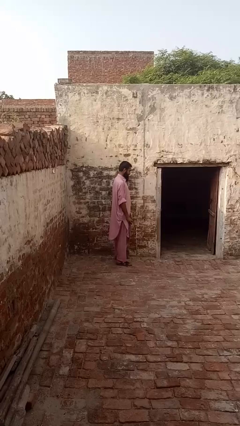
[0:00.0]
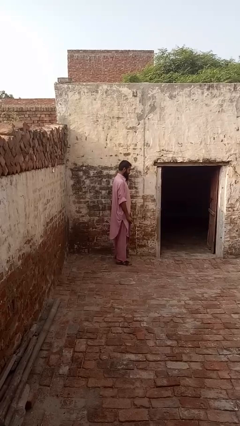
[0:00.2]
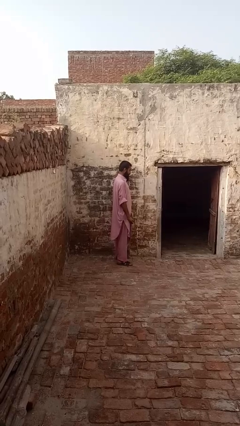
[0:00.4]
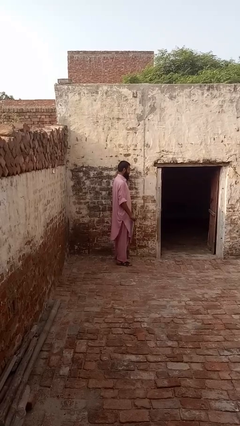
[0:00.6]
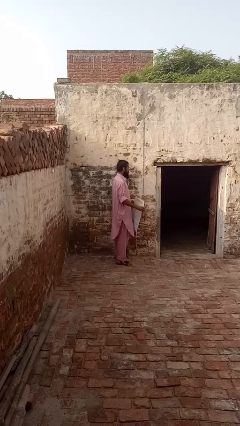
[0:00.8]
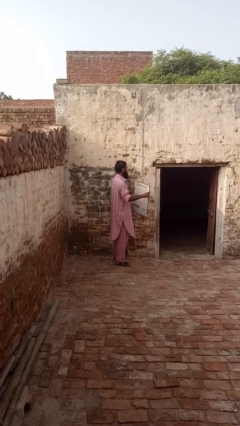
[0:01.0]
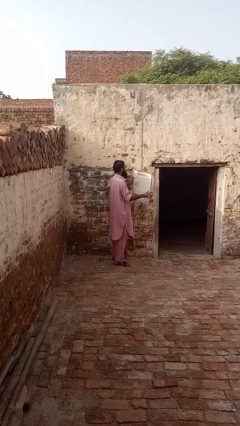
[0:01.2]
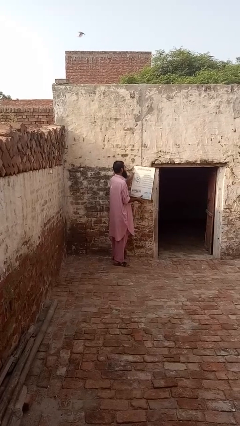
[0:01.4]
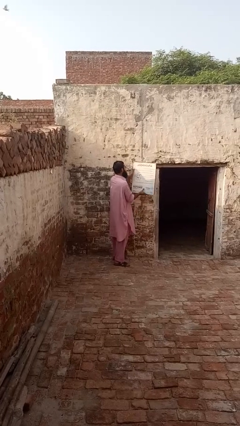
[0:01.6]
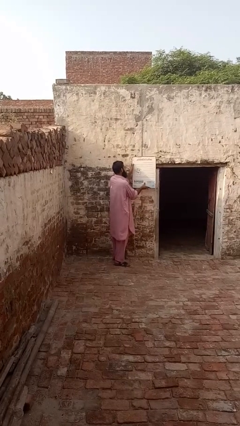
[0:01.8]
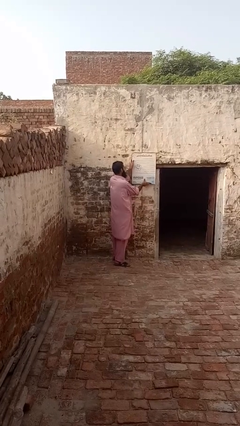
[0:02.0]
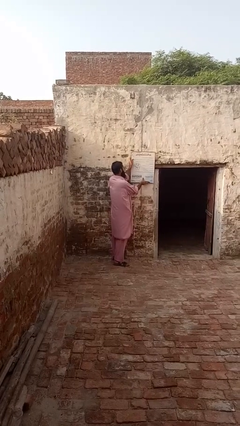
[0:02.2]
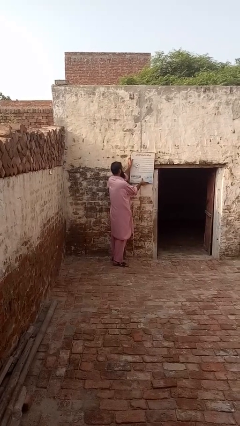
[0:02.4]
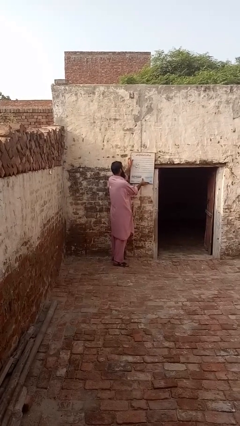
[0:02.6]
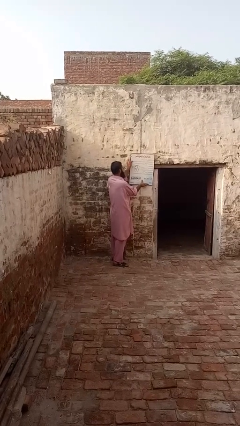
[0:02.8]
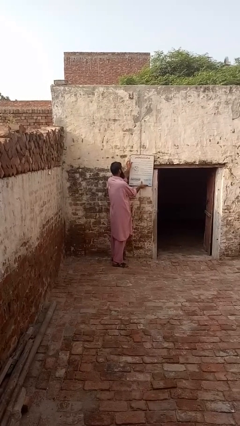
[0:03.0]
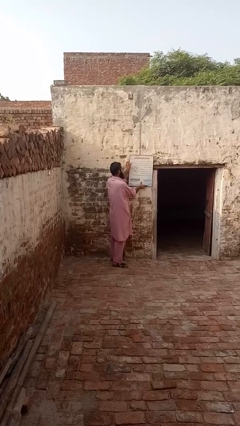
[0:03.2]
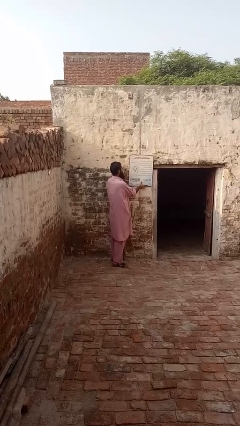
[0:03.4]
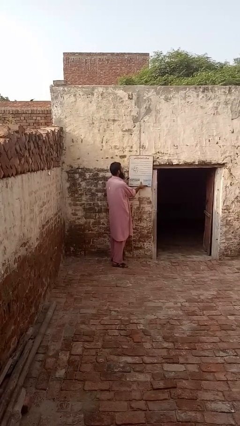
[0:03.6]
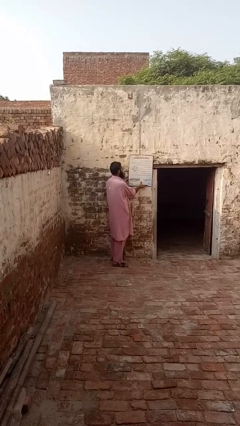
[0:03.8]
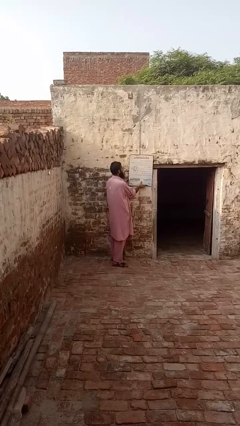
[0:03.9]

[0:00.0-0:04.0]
person puts up picture frame

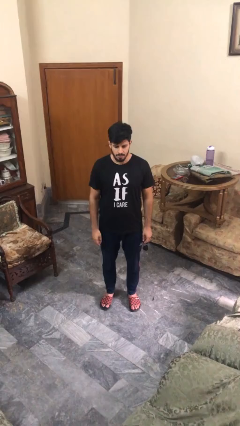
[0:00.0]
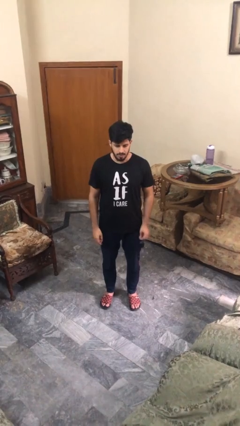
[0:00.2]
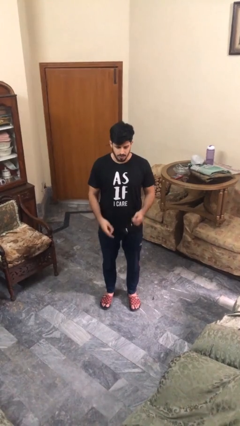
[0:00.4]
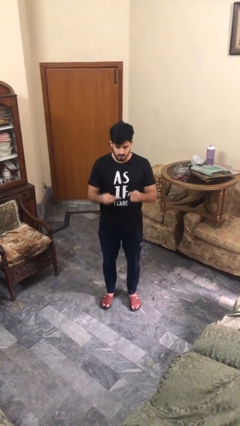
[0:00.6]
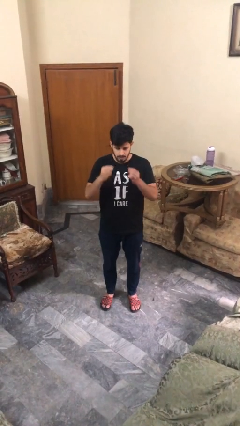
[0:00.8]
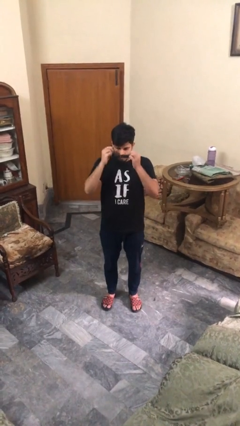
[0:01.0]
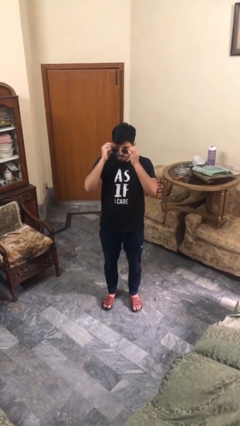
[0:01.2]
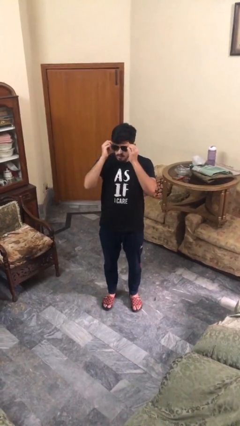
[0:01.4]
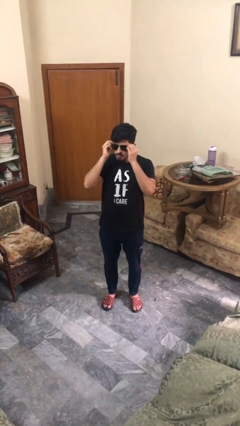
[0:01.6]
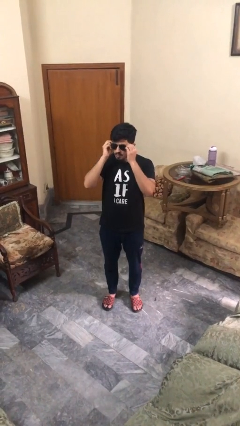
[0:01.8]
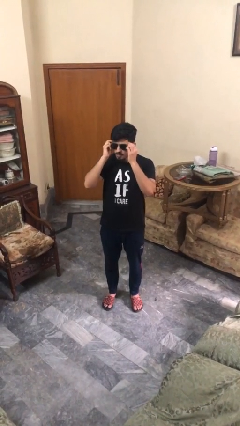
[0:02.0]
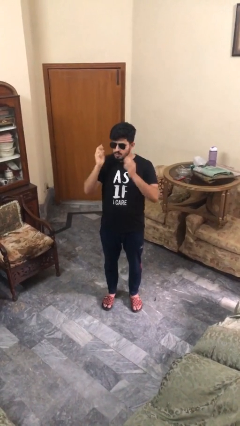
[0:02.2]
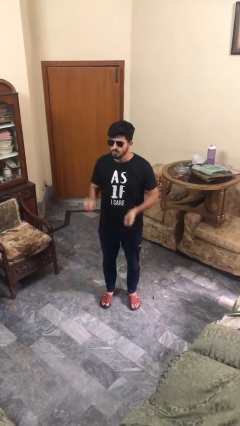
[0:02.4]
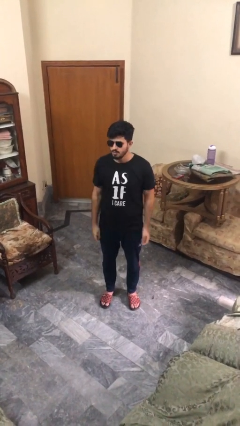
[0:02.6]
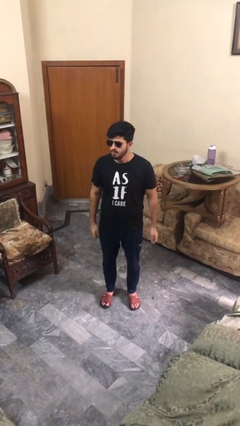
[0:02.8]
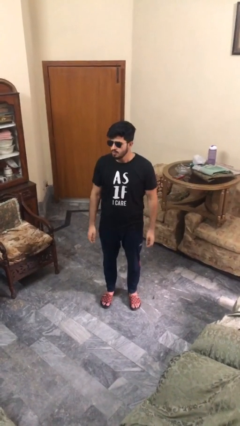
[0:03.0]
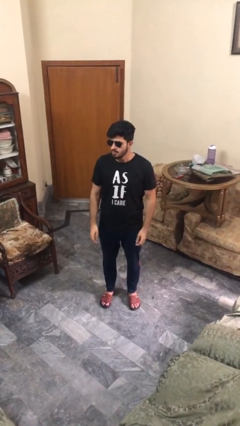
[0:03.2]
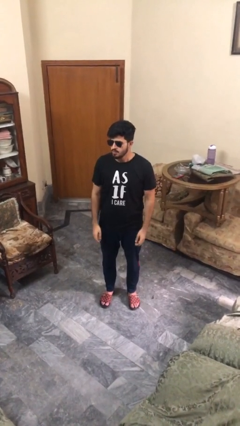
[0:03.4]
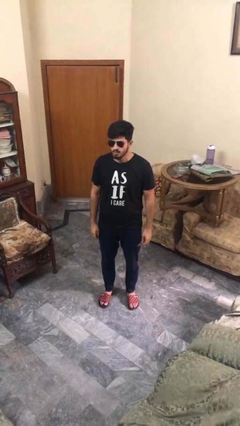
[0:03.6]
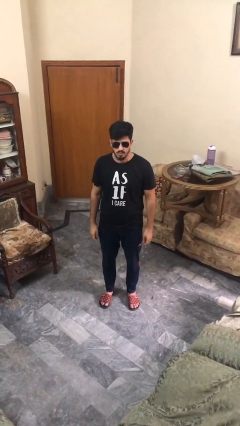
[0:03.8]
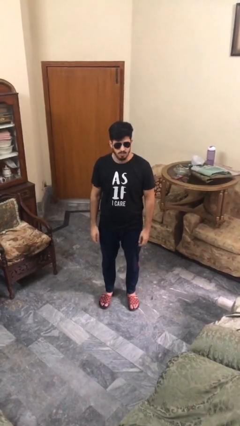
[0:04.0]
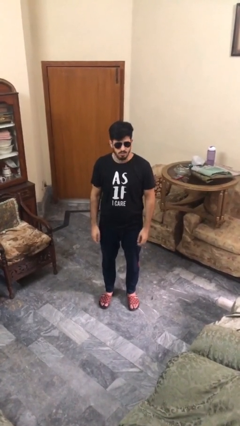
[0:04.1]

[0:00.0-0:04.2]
person puts on sunglasses

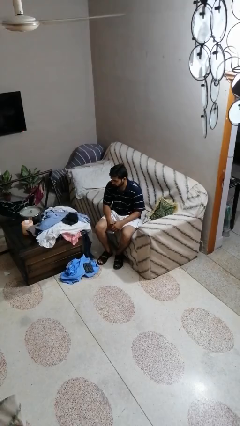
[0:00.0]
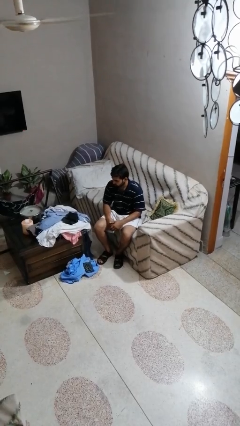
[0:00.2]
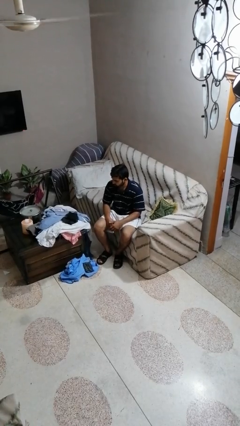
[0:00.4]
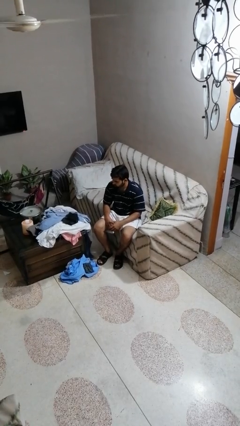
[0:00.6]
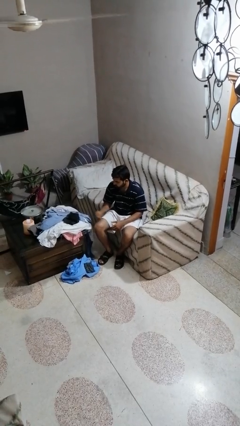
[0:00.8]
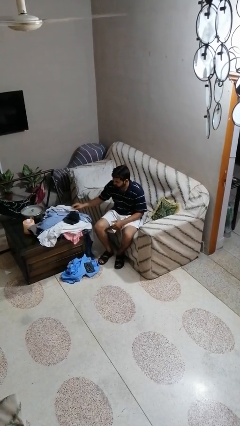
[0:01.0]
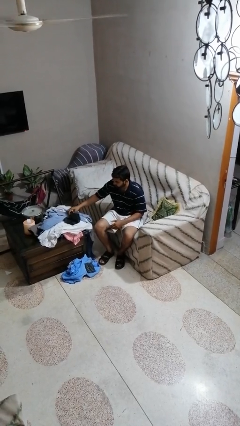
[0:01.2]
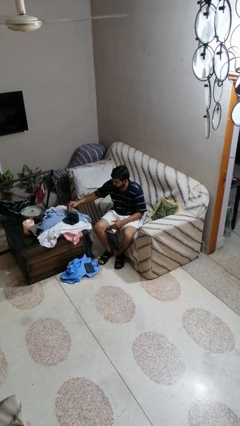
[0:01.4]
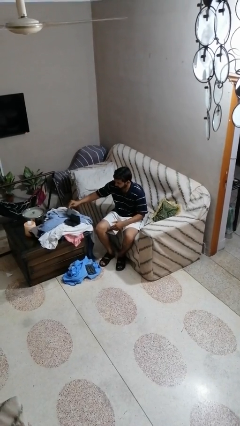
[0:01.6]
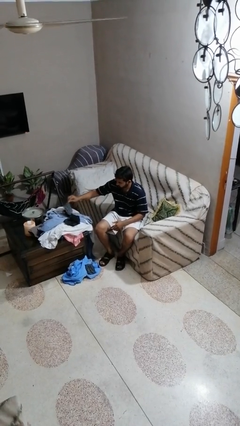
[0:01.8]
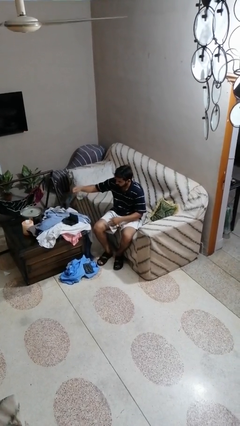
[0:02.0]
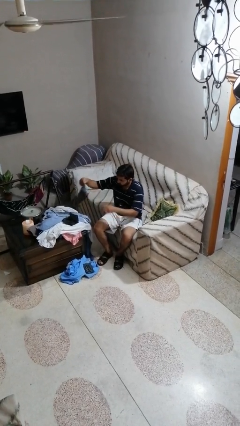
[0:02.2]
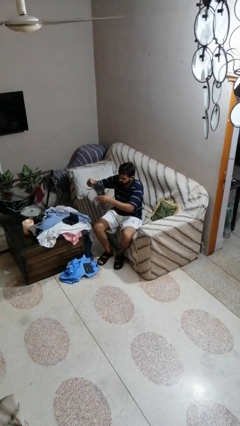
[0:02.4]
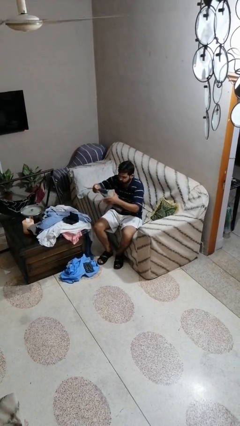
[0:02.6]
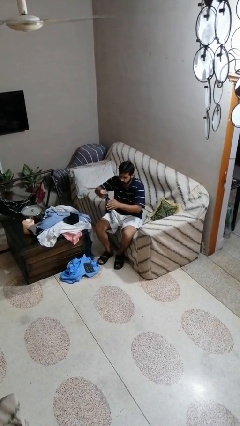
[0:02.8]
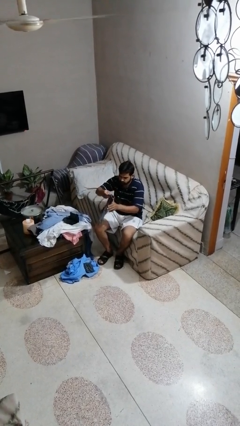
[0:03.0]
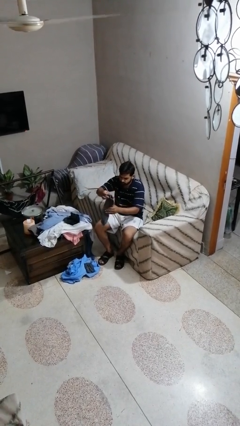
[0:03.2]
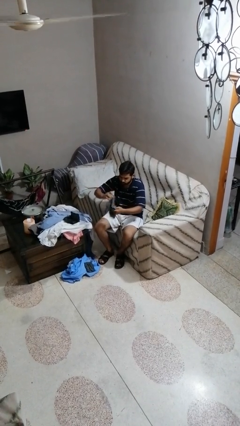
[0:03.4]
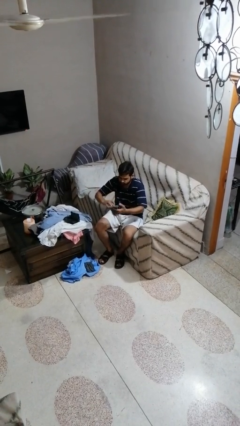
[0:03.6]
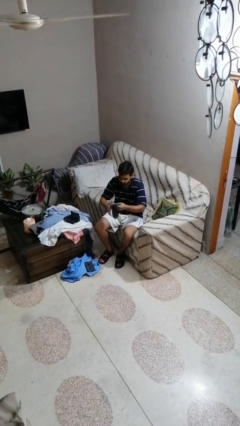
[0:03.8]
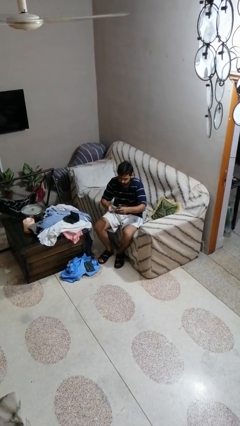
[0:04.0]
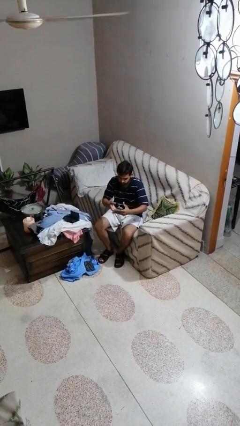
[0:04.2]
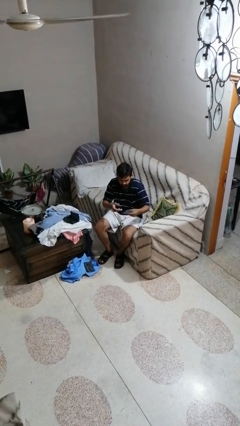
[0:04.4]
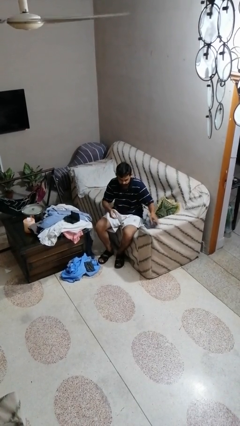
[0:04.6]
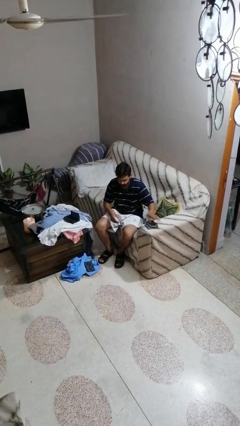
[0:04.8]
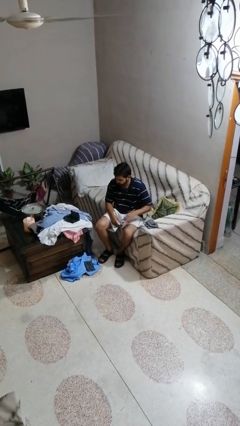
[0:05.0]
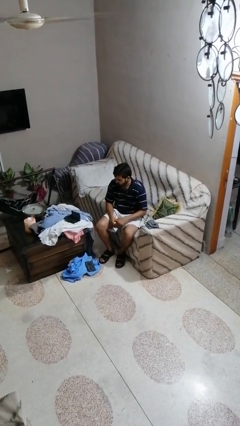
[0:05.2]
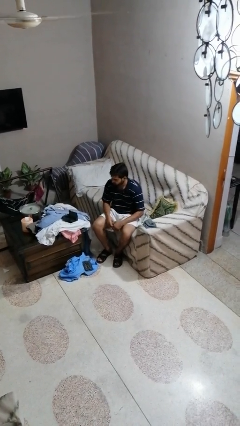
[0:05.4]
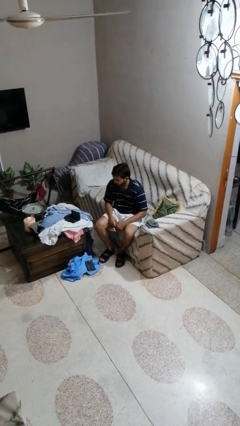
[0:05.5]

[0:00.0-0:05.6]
person folds socks

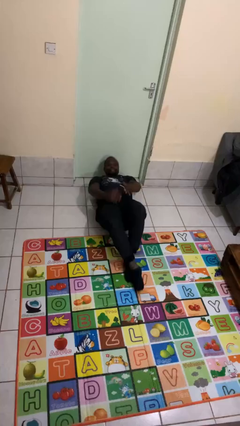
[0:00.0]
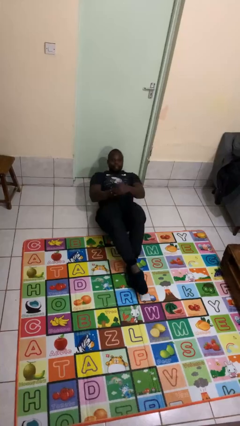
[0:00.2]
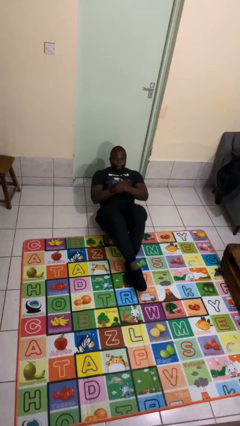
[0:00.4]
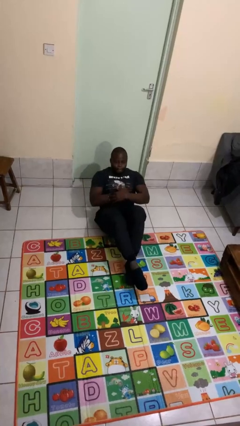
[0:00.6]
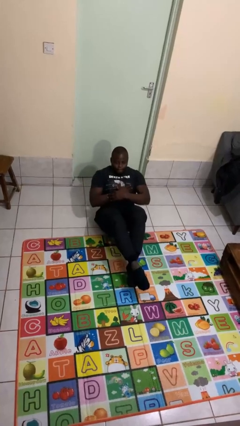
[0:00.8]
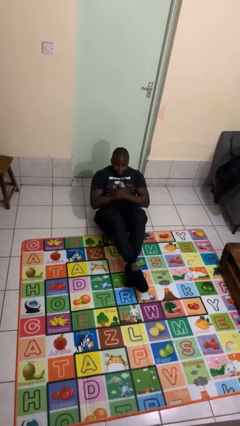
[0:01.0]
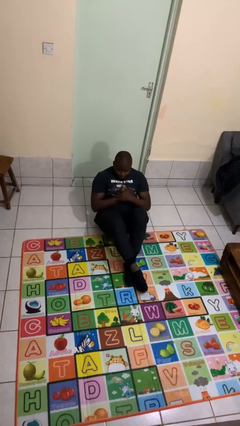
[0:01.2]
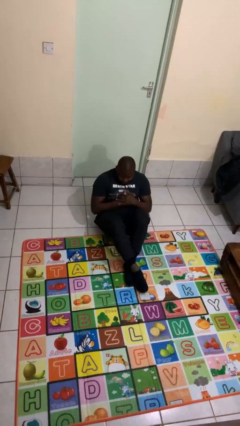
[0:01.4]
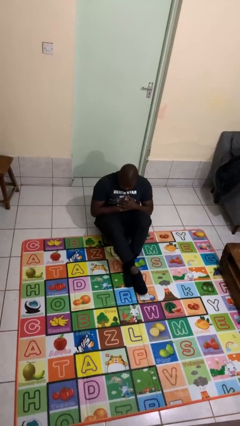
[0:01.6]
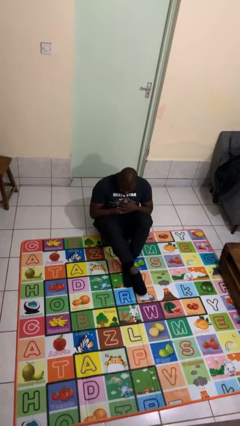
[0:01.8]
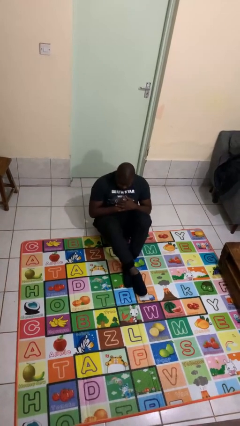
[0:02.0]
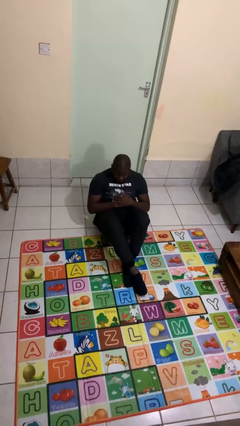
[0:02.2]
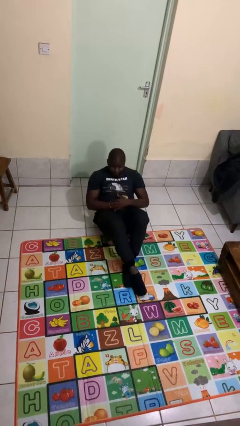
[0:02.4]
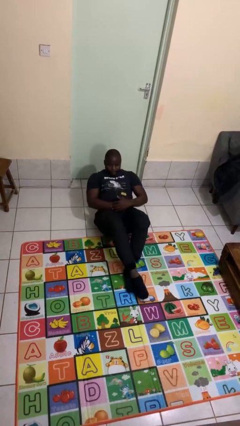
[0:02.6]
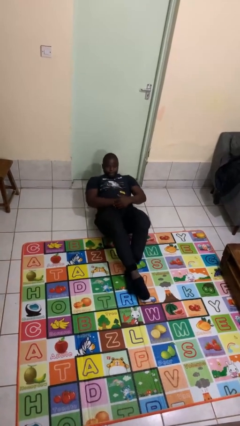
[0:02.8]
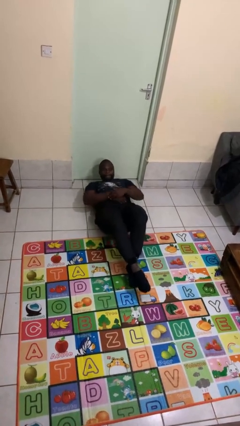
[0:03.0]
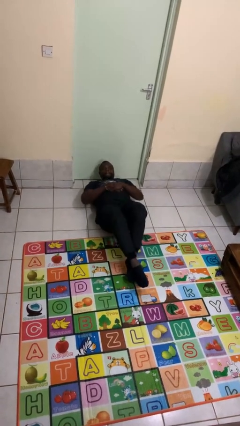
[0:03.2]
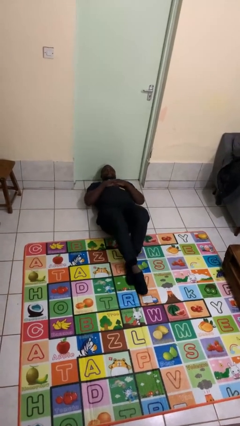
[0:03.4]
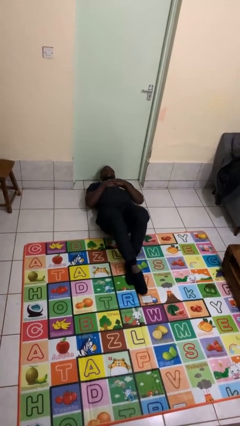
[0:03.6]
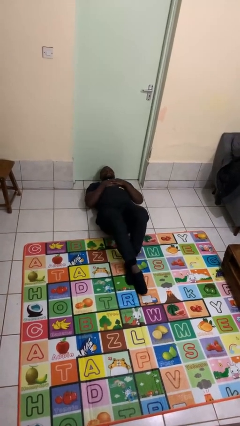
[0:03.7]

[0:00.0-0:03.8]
person exercises with situp

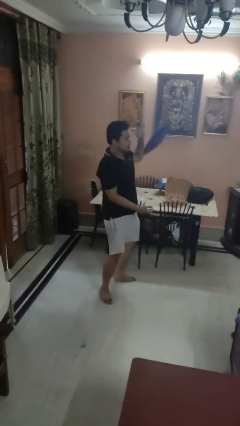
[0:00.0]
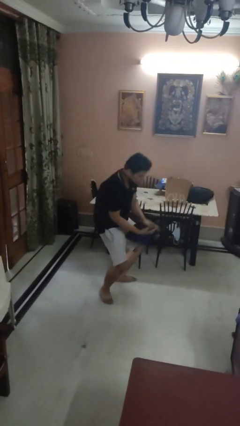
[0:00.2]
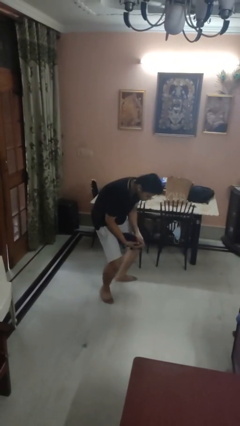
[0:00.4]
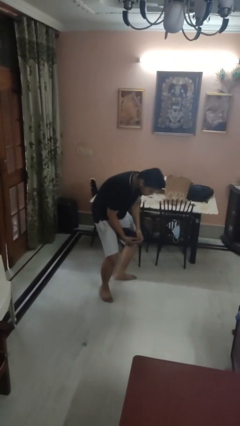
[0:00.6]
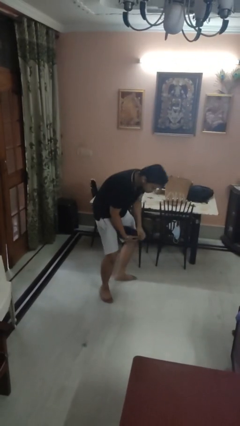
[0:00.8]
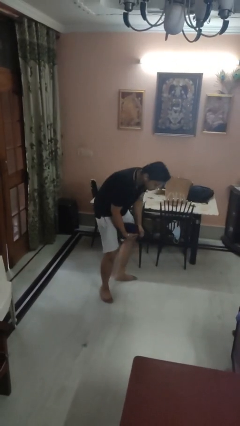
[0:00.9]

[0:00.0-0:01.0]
person catches dropped object
